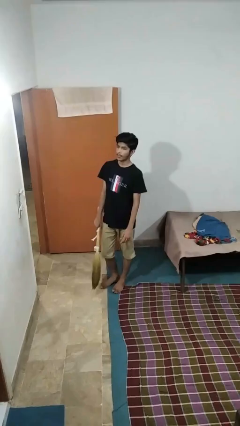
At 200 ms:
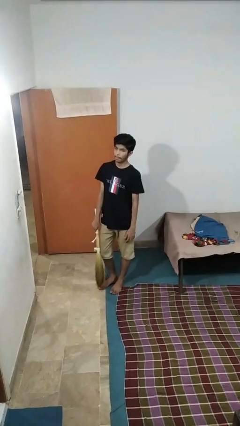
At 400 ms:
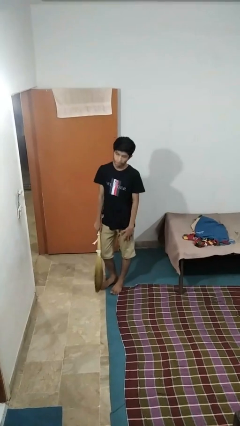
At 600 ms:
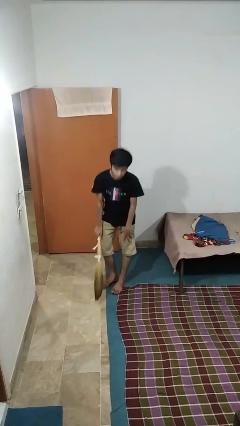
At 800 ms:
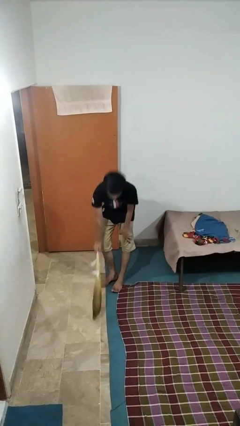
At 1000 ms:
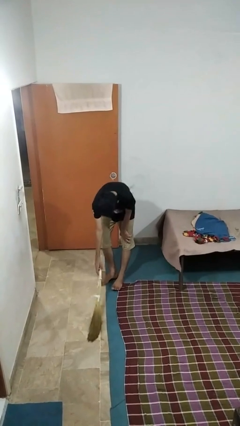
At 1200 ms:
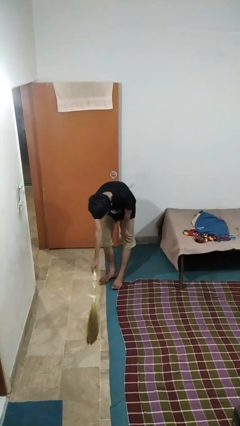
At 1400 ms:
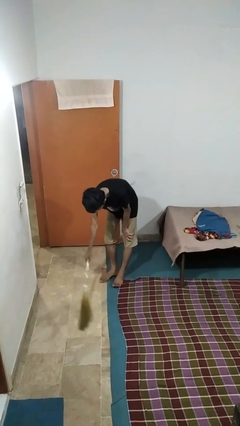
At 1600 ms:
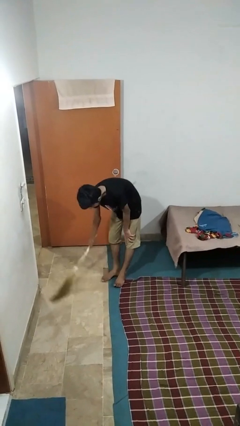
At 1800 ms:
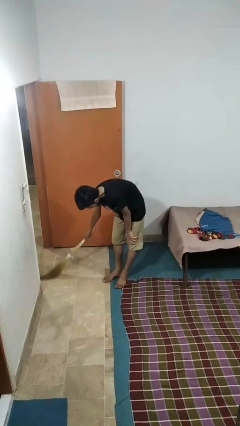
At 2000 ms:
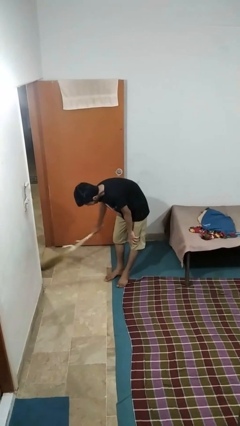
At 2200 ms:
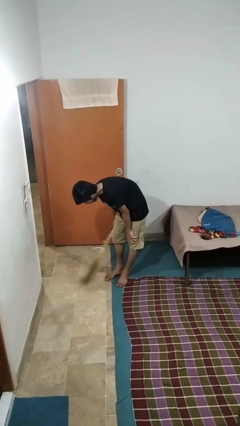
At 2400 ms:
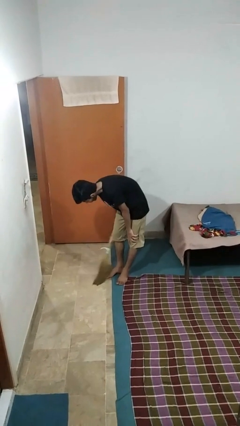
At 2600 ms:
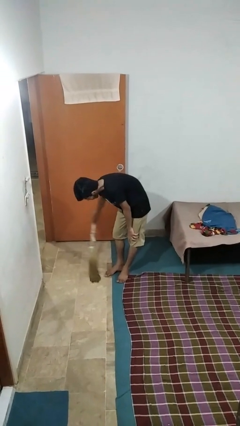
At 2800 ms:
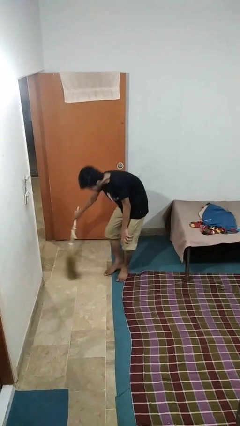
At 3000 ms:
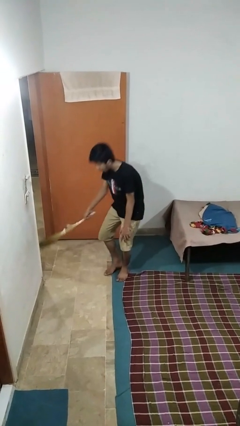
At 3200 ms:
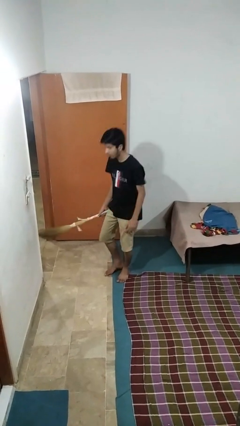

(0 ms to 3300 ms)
person sweeps floor

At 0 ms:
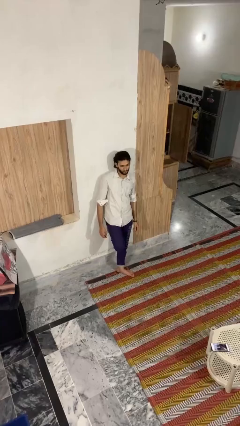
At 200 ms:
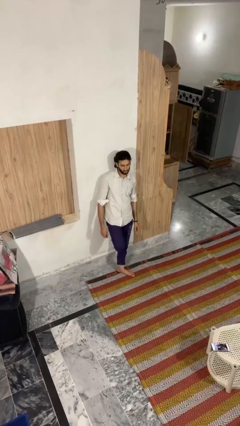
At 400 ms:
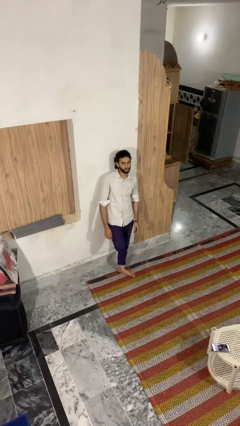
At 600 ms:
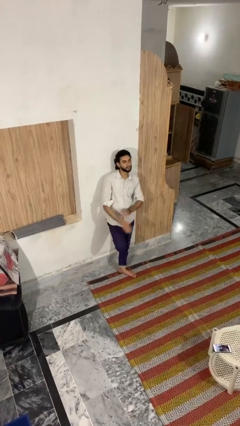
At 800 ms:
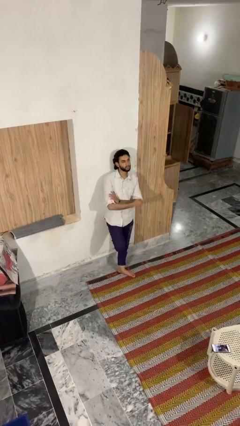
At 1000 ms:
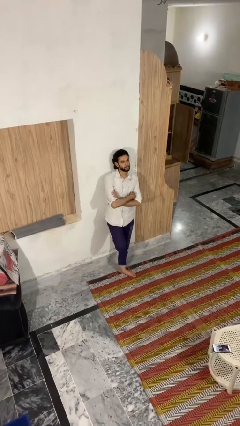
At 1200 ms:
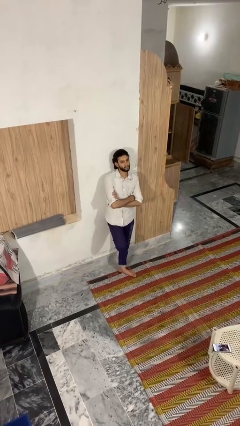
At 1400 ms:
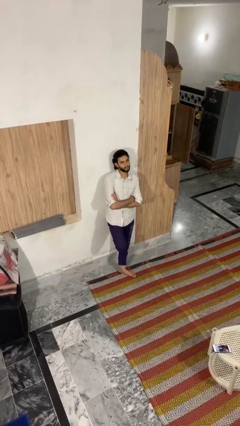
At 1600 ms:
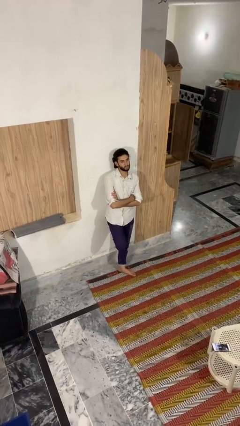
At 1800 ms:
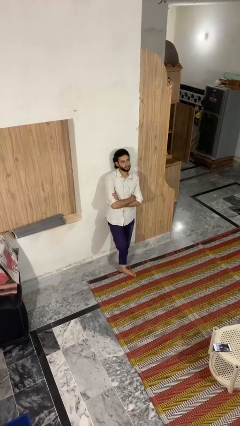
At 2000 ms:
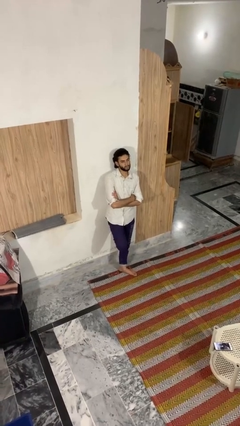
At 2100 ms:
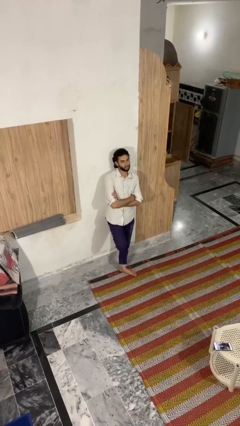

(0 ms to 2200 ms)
person crosses arms

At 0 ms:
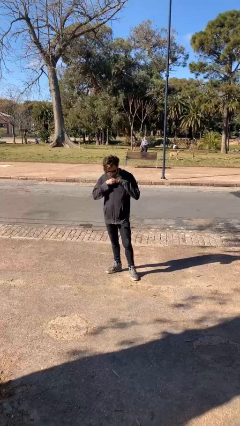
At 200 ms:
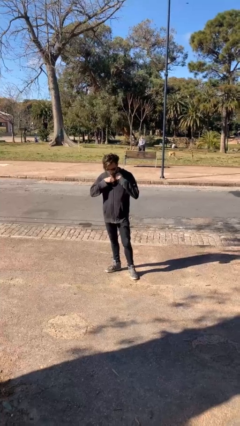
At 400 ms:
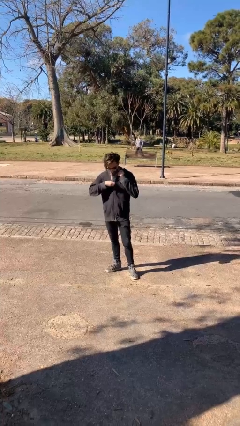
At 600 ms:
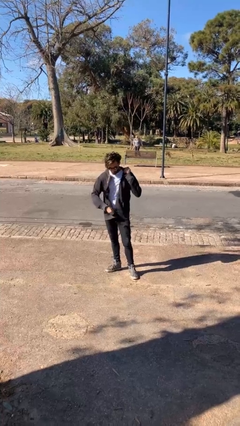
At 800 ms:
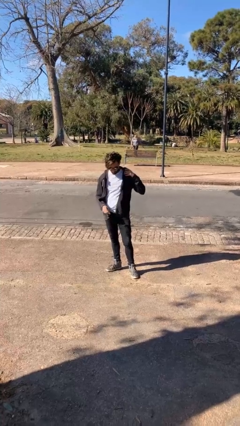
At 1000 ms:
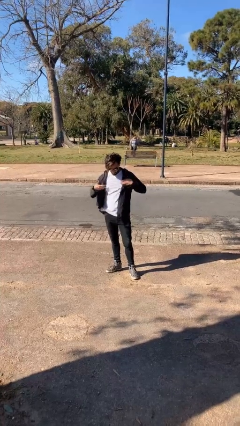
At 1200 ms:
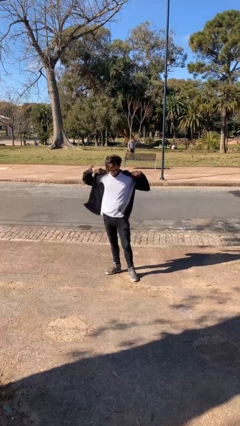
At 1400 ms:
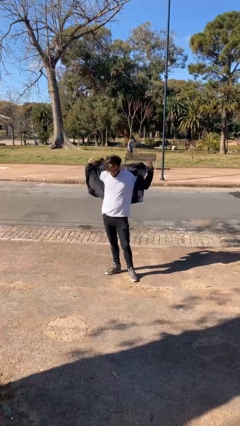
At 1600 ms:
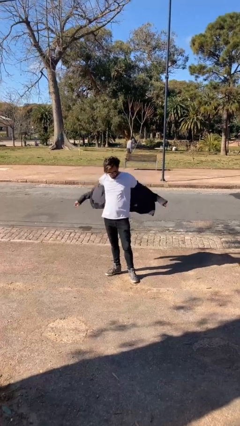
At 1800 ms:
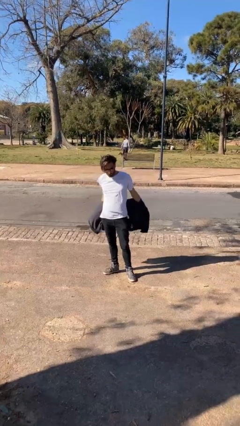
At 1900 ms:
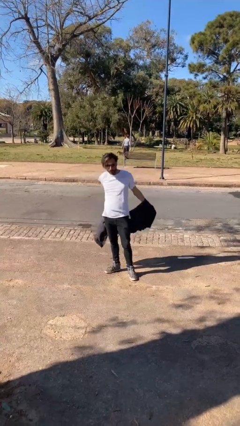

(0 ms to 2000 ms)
person unzips jacket

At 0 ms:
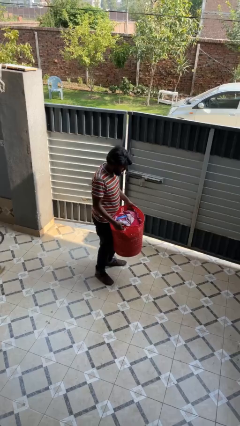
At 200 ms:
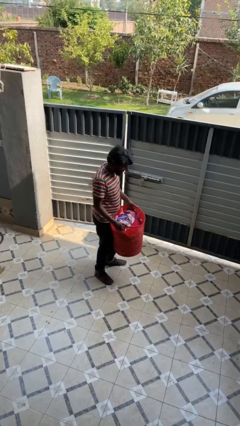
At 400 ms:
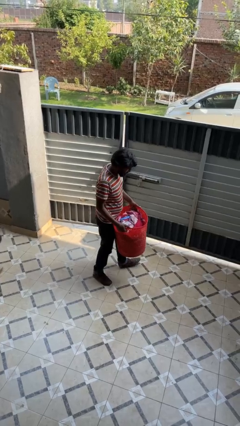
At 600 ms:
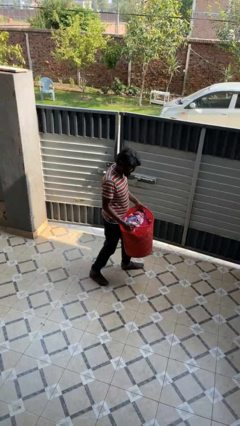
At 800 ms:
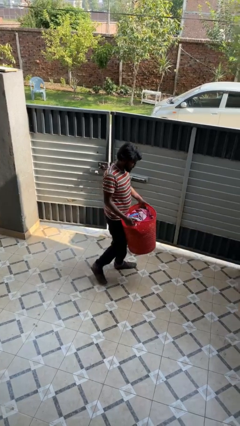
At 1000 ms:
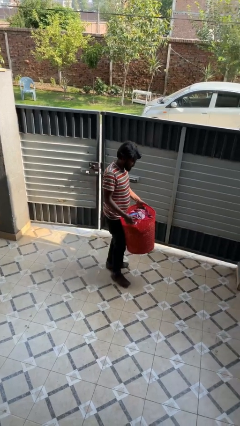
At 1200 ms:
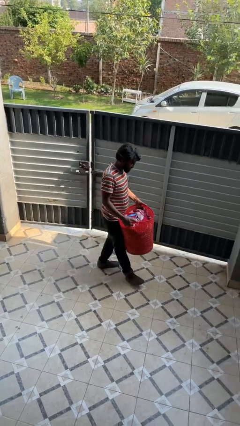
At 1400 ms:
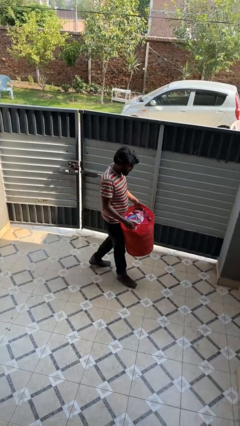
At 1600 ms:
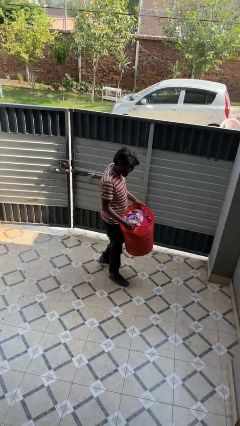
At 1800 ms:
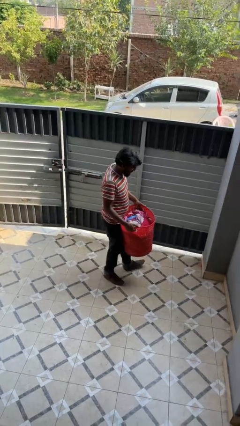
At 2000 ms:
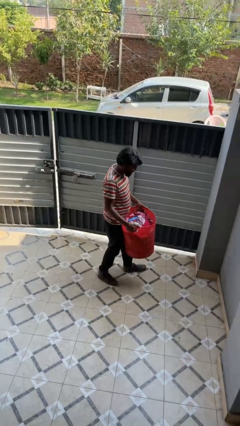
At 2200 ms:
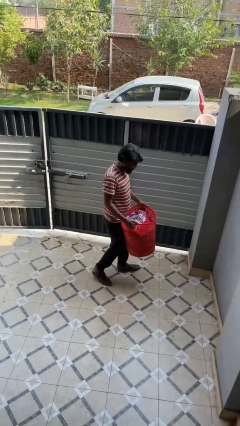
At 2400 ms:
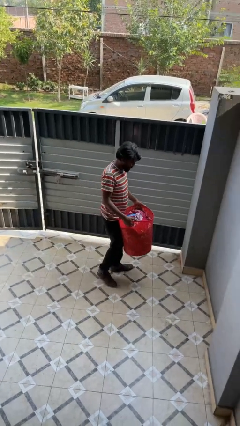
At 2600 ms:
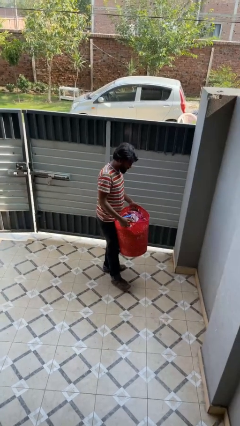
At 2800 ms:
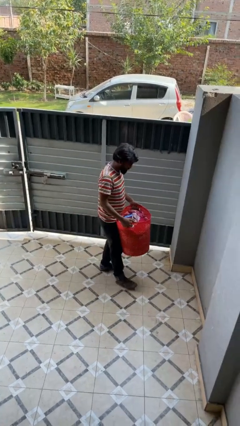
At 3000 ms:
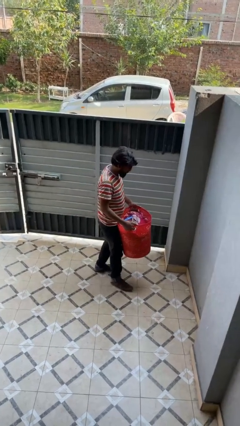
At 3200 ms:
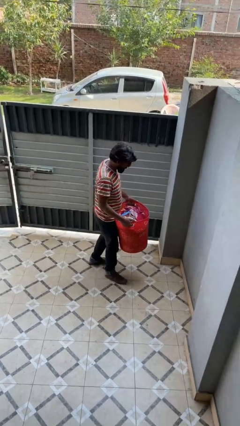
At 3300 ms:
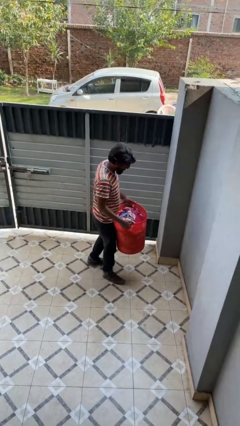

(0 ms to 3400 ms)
person carries laundry basket

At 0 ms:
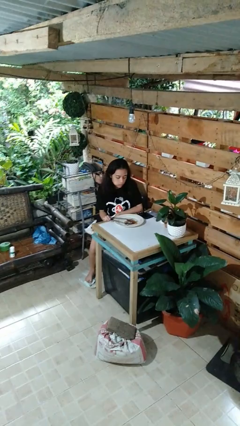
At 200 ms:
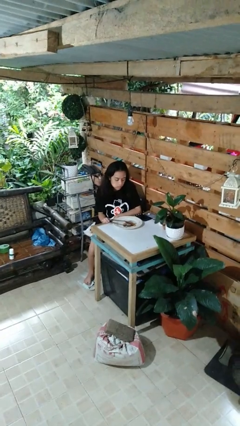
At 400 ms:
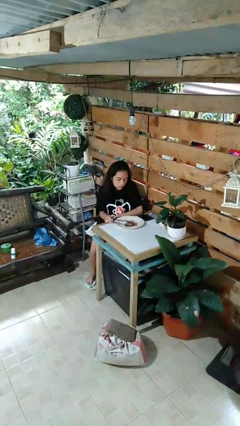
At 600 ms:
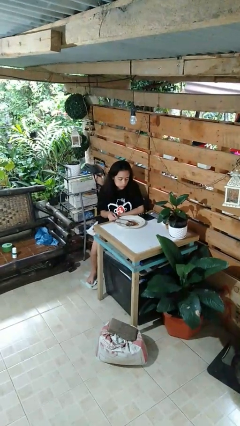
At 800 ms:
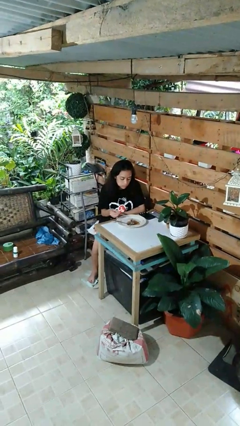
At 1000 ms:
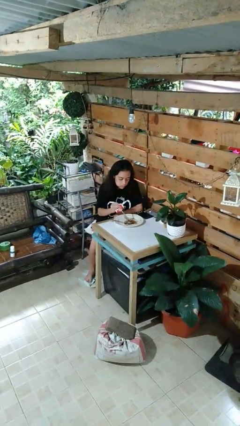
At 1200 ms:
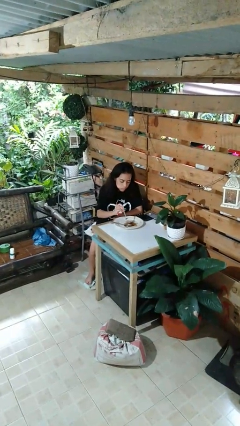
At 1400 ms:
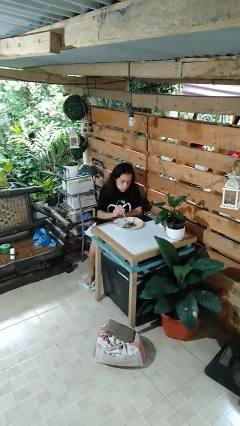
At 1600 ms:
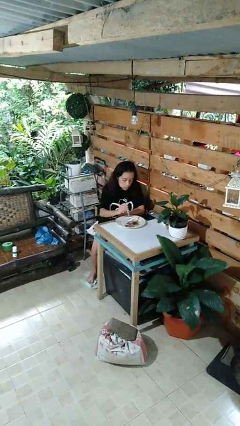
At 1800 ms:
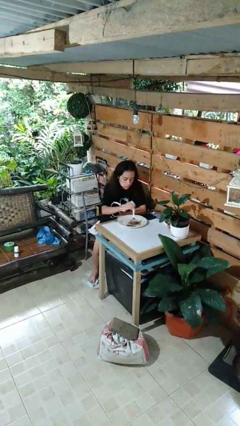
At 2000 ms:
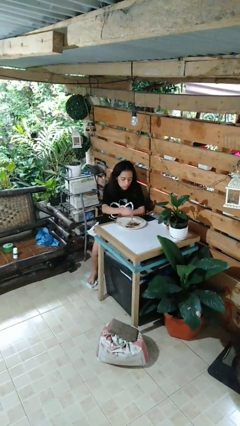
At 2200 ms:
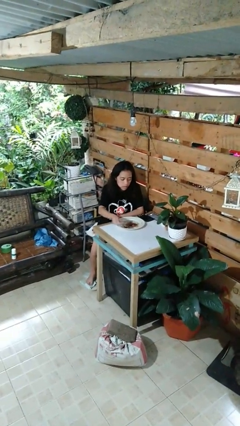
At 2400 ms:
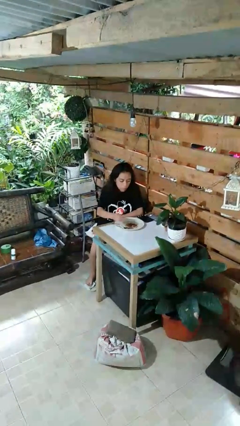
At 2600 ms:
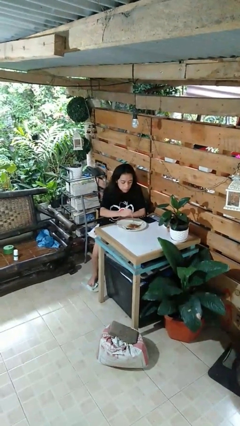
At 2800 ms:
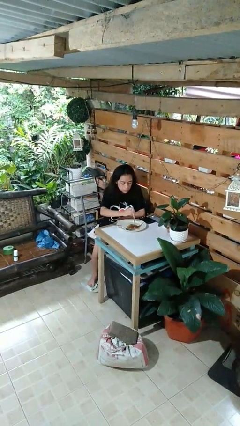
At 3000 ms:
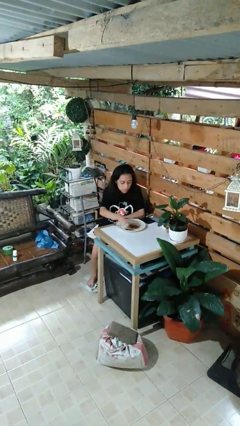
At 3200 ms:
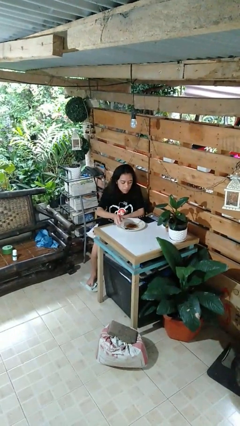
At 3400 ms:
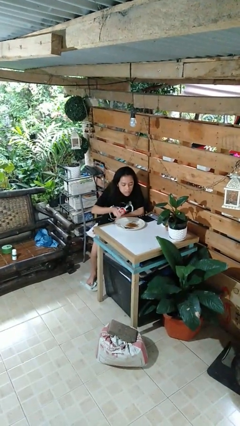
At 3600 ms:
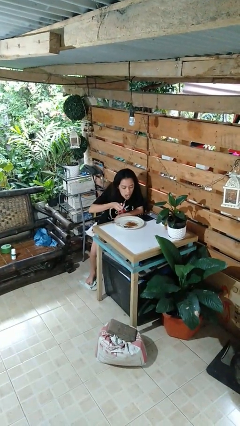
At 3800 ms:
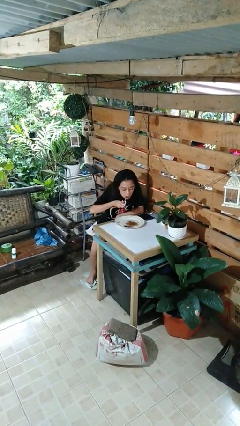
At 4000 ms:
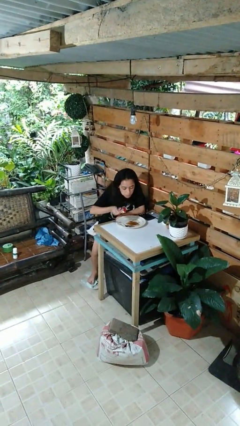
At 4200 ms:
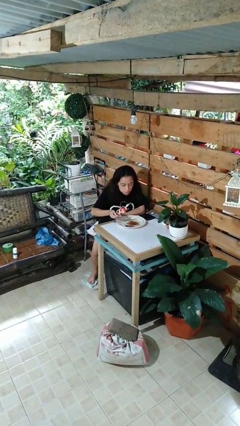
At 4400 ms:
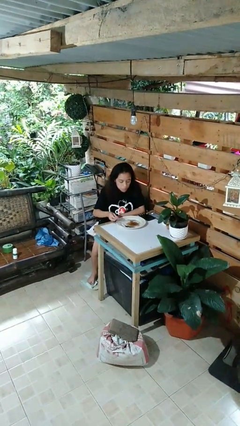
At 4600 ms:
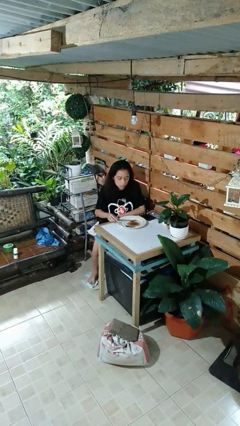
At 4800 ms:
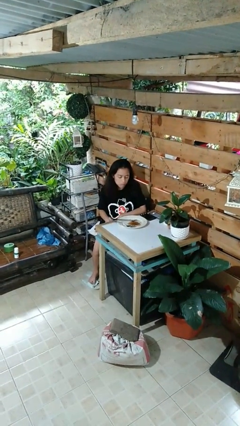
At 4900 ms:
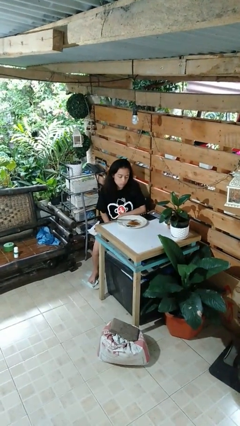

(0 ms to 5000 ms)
person eats with utensil

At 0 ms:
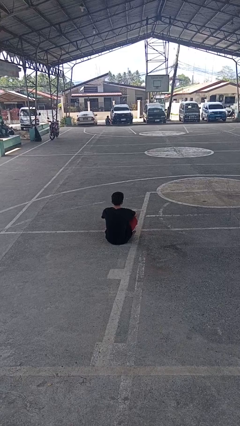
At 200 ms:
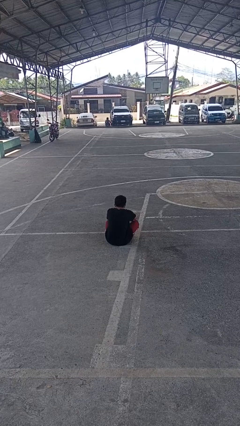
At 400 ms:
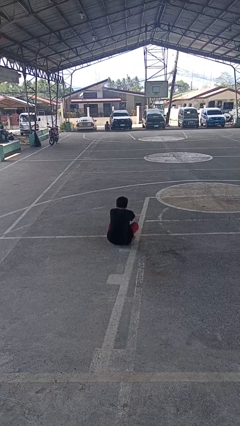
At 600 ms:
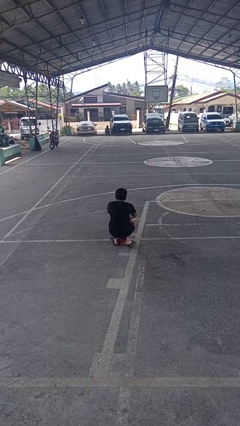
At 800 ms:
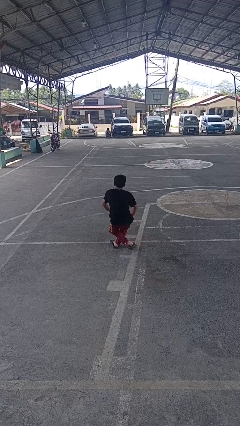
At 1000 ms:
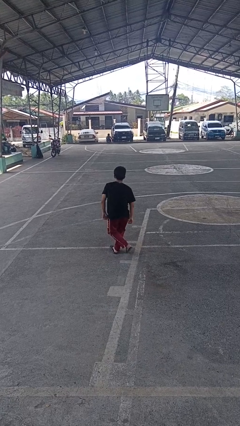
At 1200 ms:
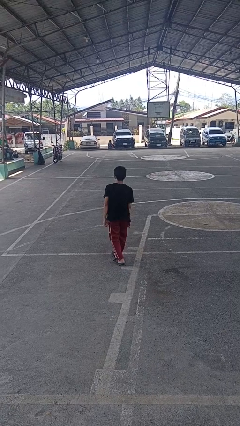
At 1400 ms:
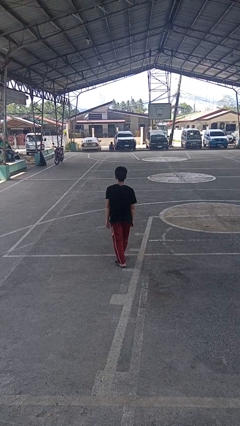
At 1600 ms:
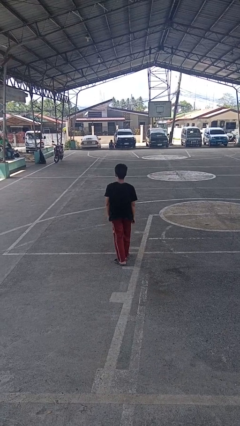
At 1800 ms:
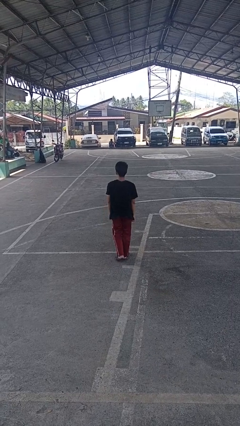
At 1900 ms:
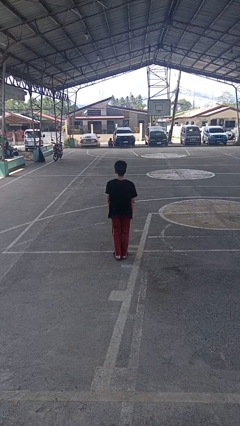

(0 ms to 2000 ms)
person stands up from floor
